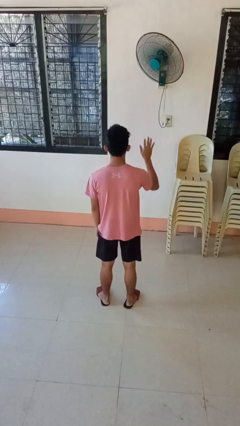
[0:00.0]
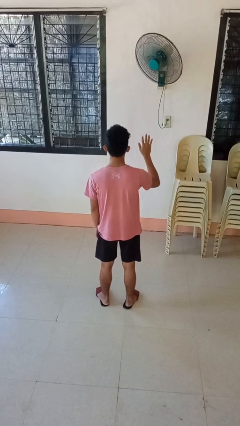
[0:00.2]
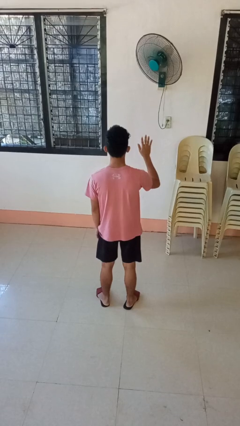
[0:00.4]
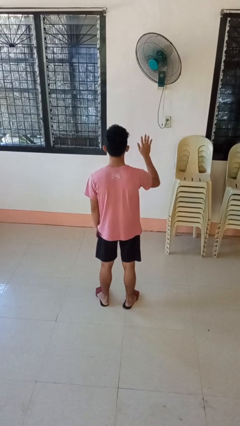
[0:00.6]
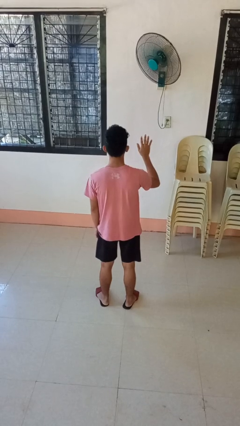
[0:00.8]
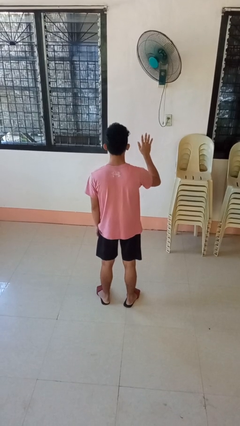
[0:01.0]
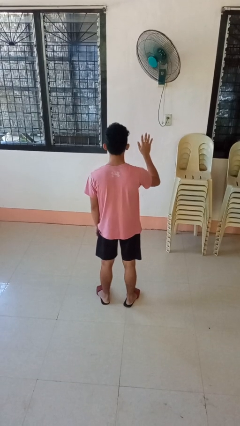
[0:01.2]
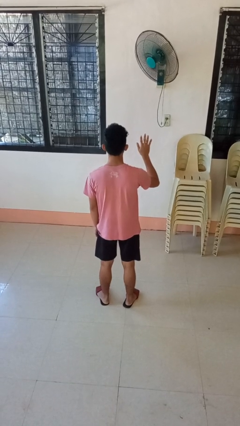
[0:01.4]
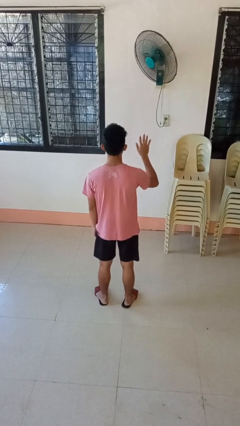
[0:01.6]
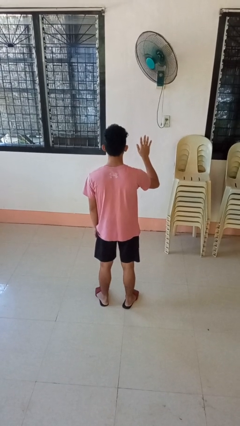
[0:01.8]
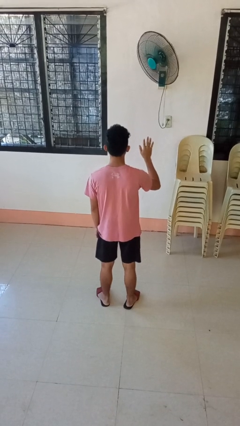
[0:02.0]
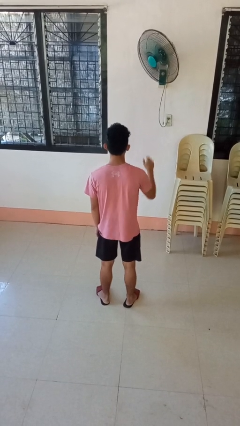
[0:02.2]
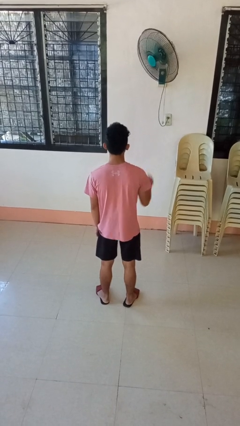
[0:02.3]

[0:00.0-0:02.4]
person gestures number five

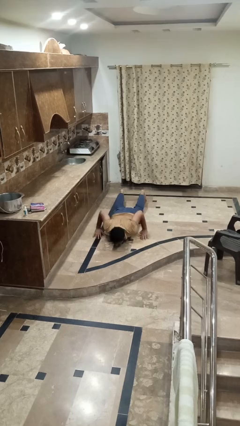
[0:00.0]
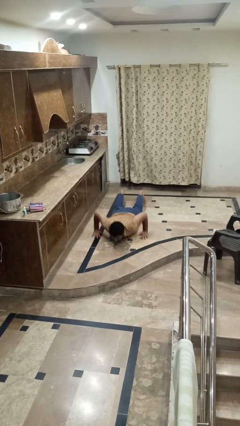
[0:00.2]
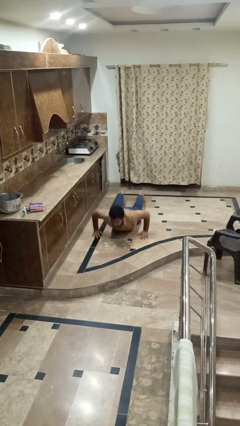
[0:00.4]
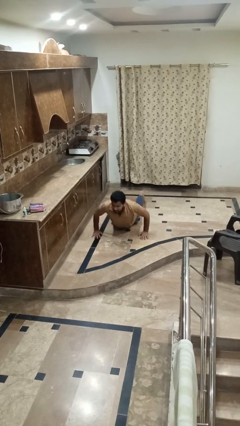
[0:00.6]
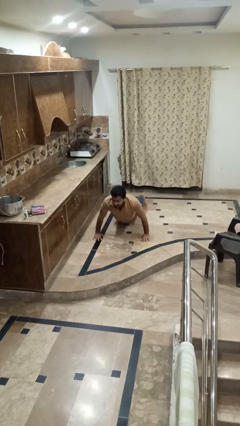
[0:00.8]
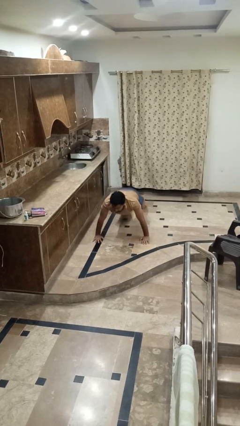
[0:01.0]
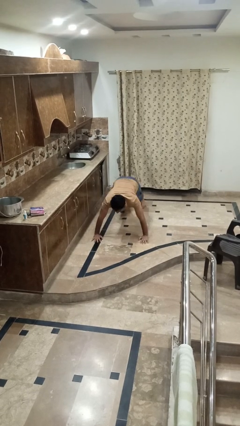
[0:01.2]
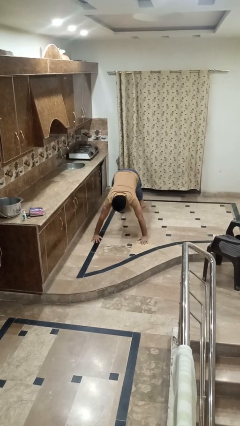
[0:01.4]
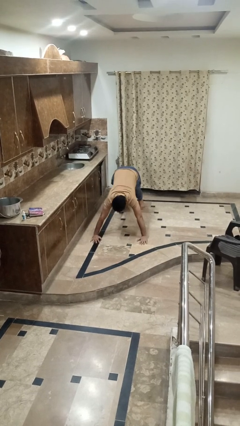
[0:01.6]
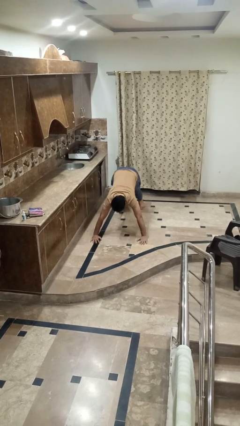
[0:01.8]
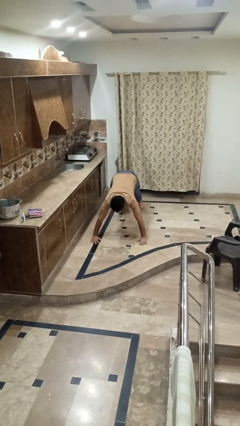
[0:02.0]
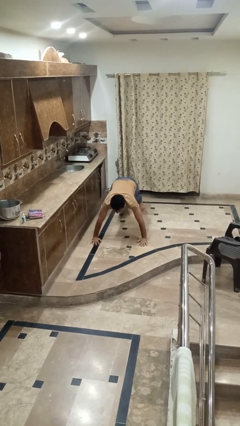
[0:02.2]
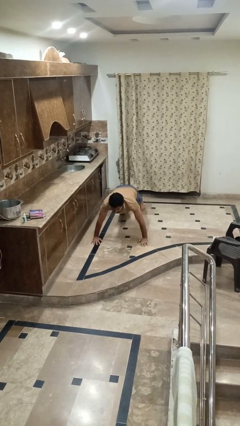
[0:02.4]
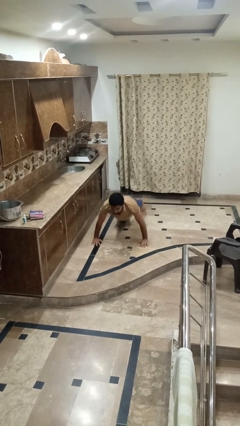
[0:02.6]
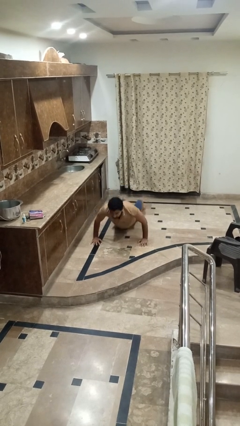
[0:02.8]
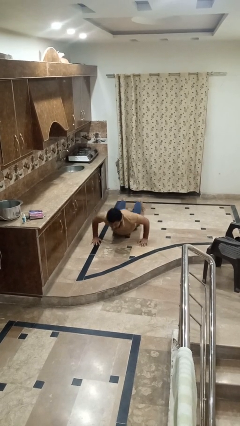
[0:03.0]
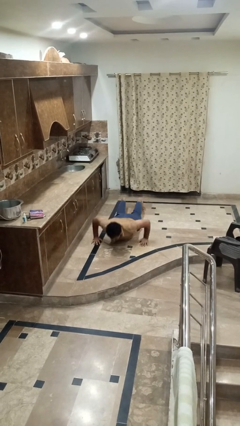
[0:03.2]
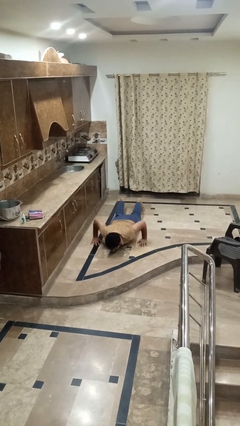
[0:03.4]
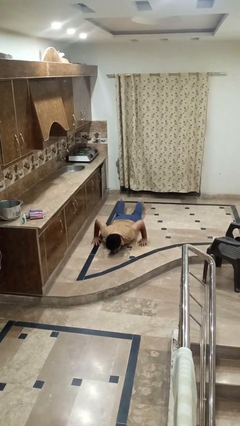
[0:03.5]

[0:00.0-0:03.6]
person exercises with pushup

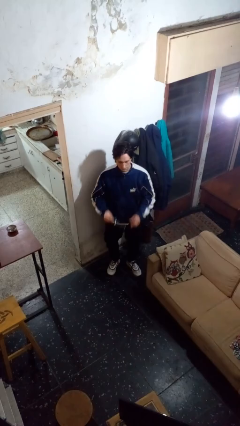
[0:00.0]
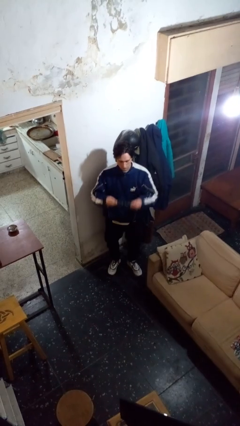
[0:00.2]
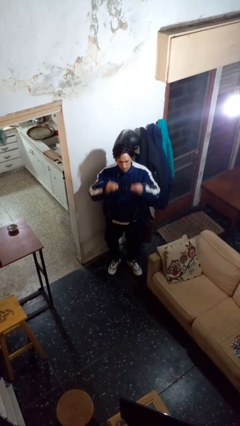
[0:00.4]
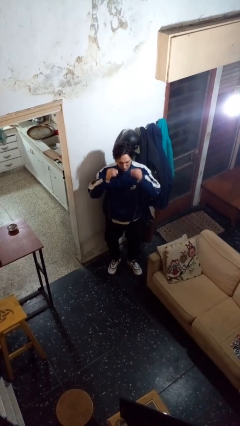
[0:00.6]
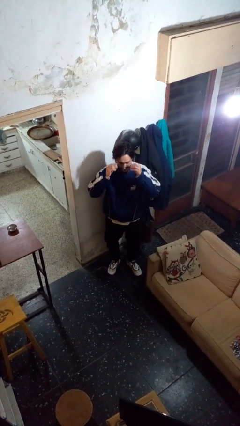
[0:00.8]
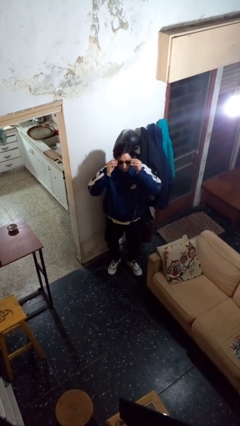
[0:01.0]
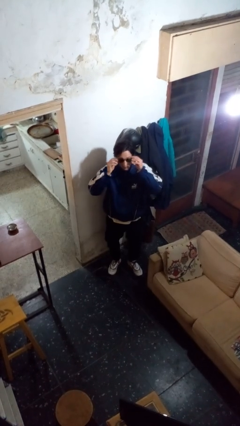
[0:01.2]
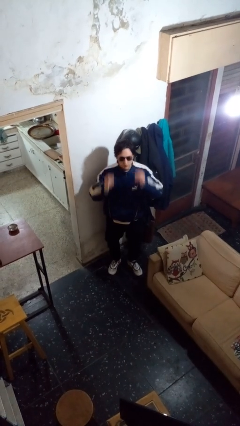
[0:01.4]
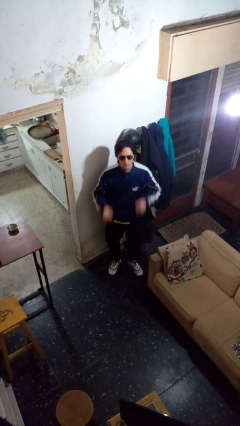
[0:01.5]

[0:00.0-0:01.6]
person puts on sunglasses

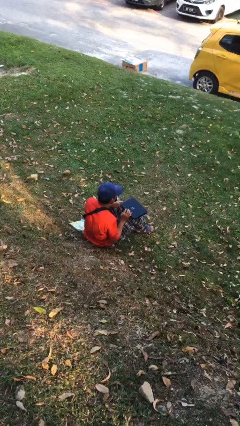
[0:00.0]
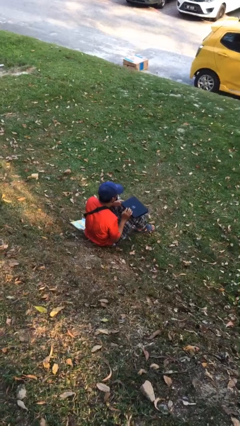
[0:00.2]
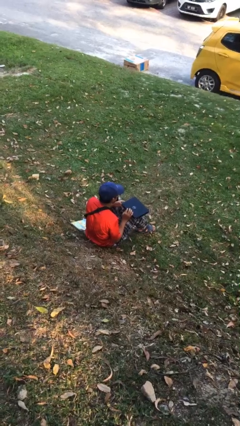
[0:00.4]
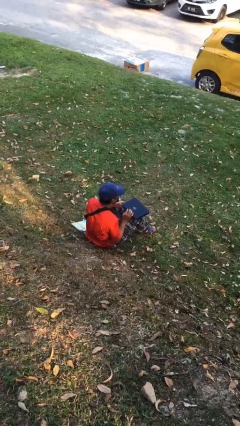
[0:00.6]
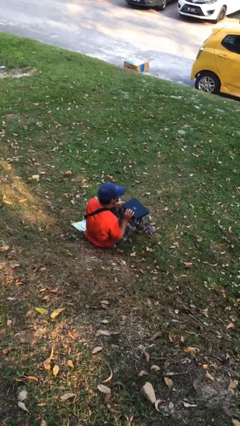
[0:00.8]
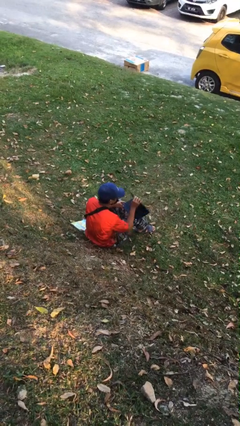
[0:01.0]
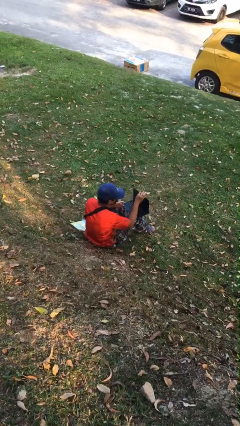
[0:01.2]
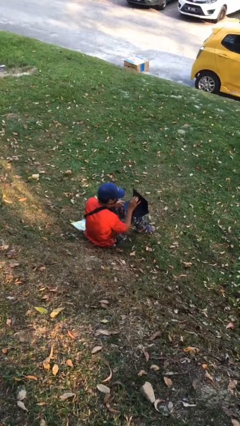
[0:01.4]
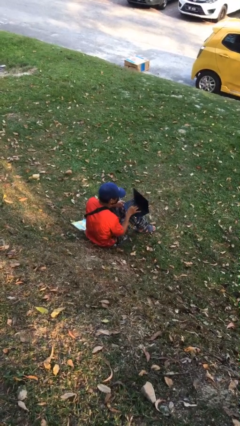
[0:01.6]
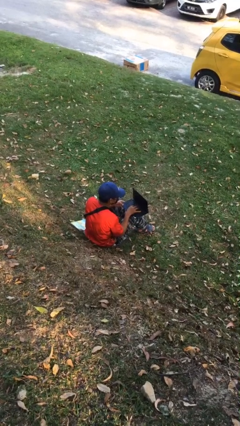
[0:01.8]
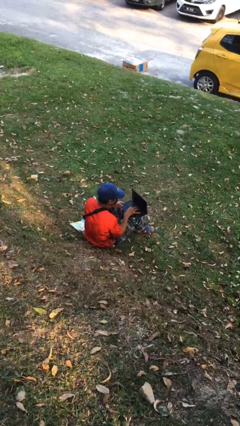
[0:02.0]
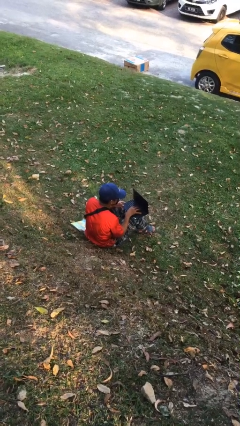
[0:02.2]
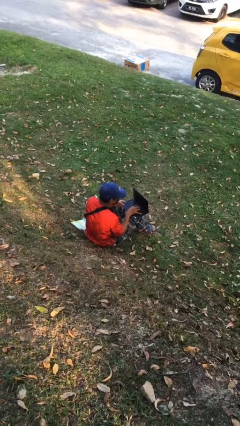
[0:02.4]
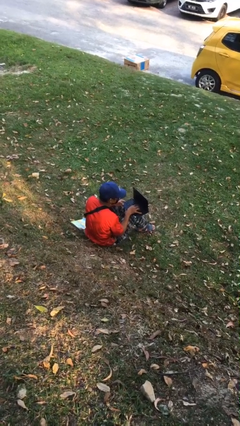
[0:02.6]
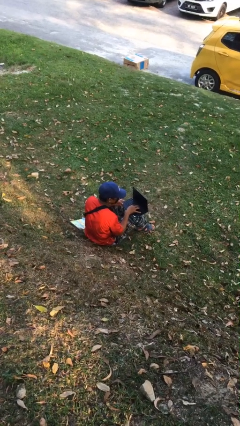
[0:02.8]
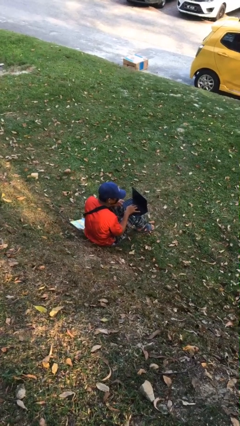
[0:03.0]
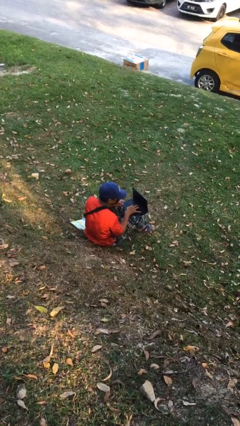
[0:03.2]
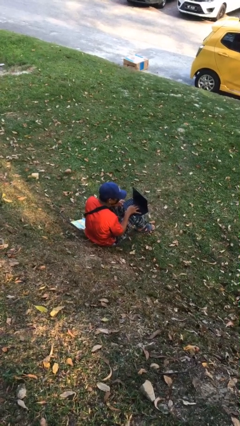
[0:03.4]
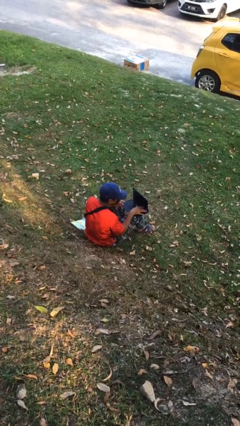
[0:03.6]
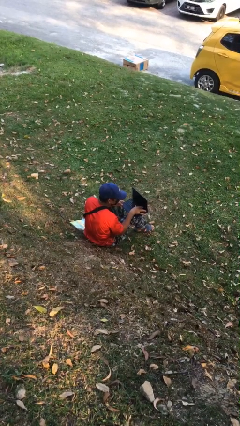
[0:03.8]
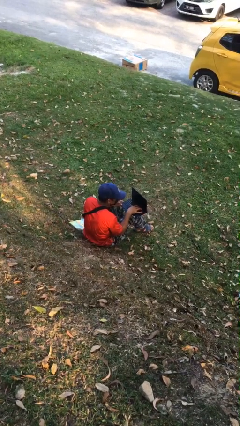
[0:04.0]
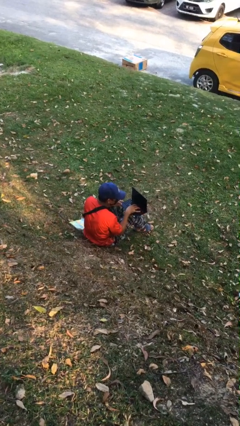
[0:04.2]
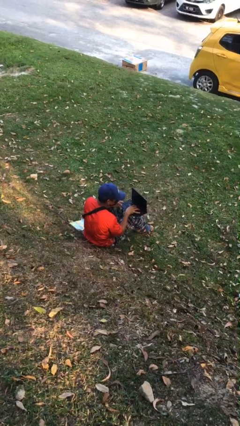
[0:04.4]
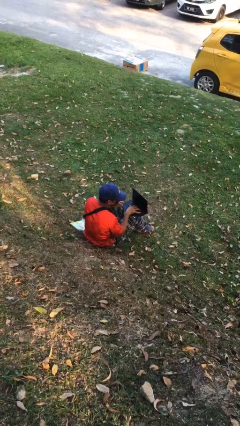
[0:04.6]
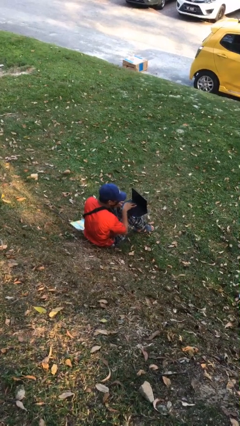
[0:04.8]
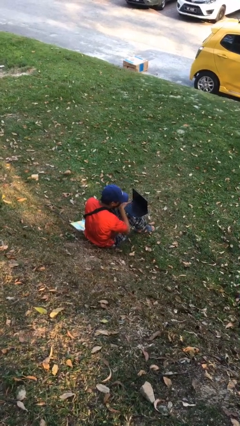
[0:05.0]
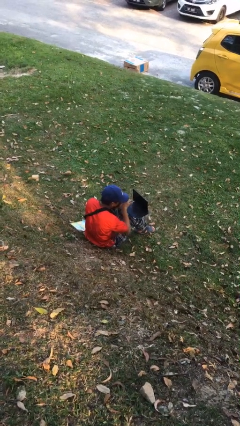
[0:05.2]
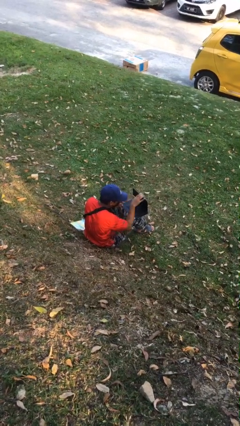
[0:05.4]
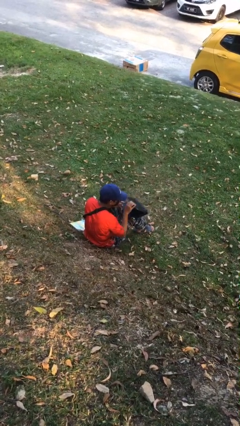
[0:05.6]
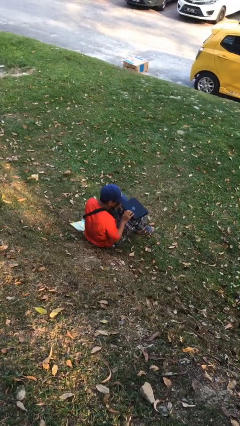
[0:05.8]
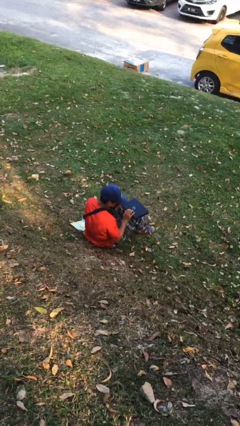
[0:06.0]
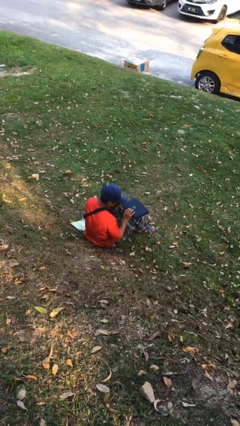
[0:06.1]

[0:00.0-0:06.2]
person interacts with laptop

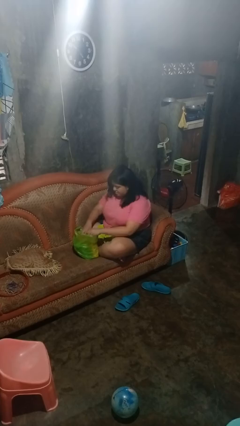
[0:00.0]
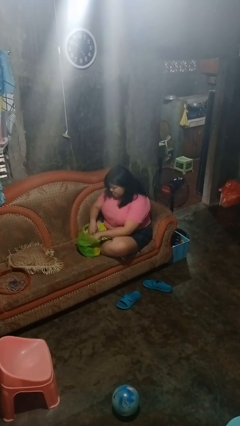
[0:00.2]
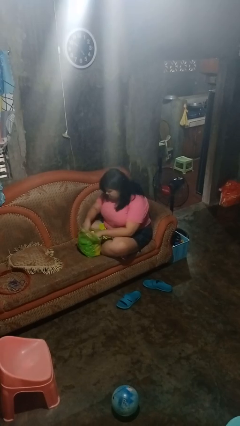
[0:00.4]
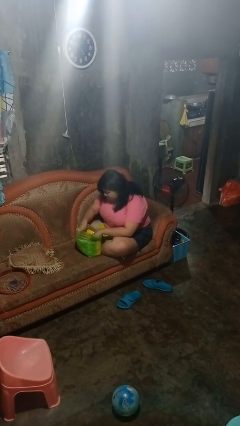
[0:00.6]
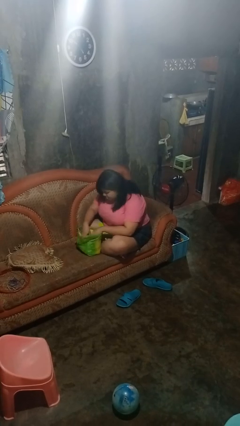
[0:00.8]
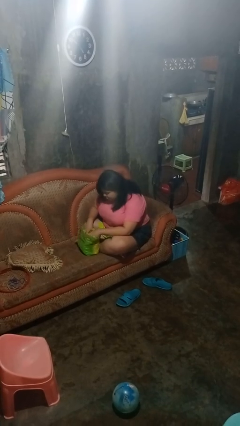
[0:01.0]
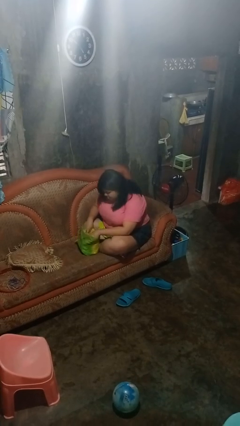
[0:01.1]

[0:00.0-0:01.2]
person searches in bag

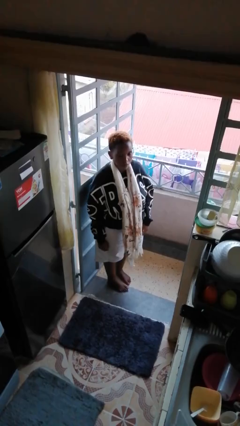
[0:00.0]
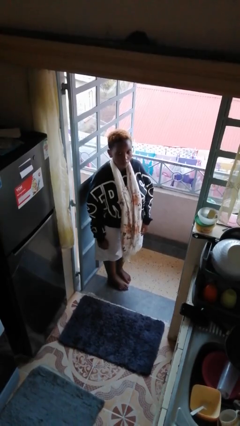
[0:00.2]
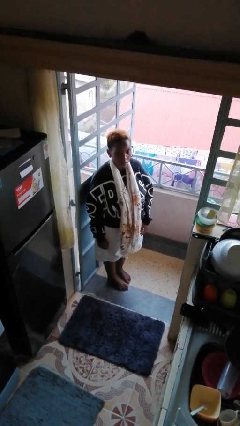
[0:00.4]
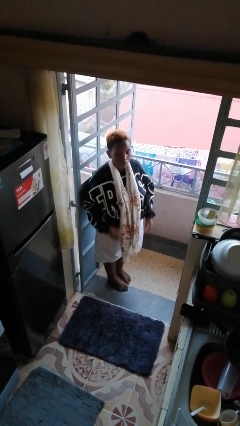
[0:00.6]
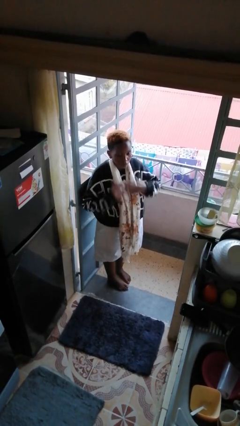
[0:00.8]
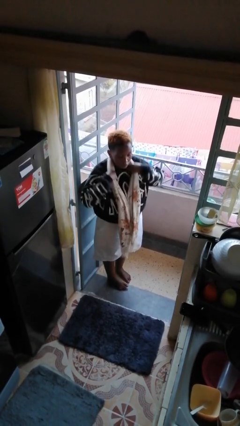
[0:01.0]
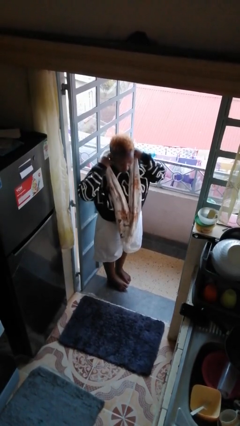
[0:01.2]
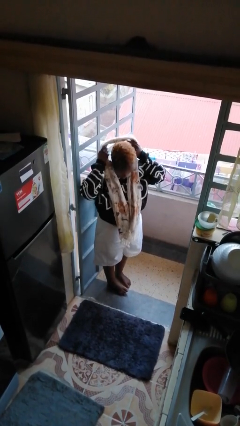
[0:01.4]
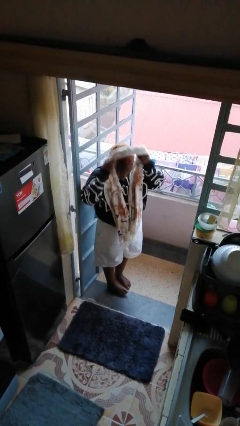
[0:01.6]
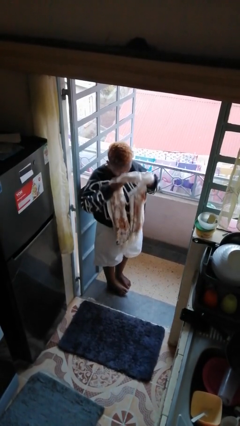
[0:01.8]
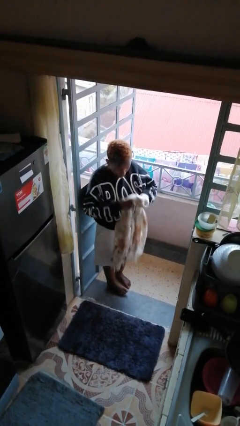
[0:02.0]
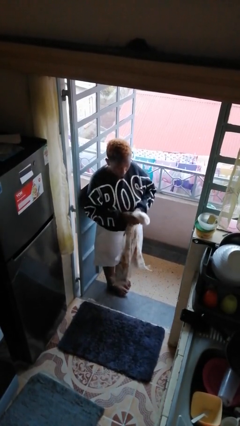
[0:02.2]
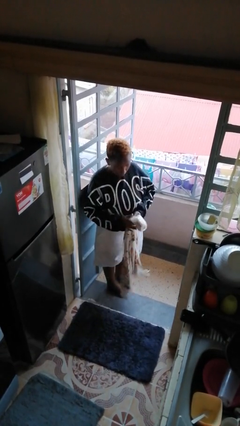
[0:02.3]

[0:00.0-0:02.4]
person takes off scarf
